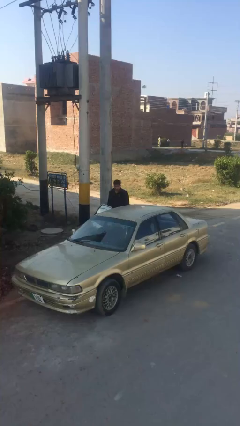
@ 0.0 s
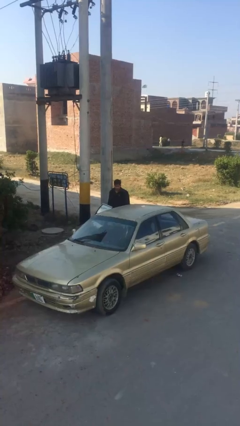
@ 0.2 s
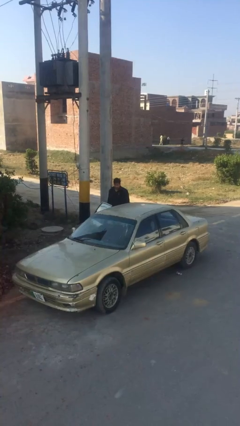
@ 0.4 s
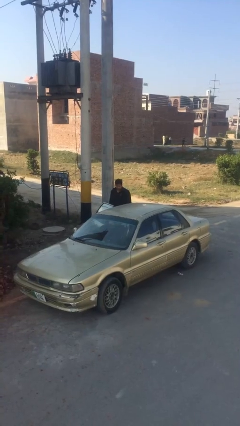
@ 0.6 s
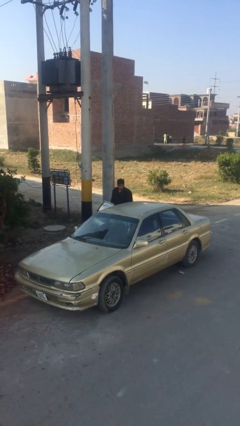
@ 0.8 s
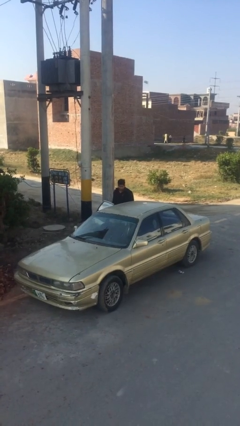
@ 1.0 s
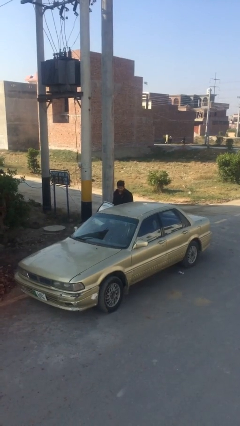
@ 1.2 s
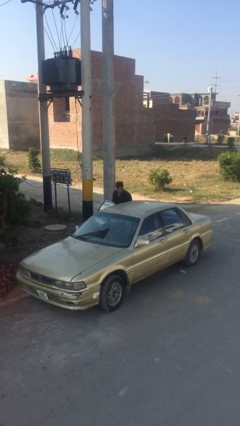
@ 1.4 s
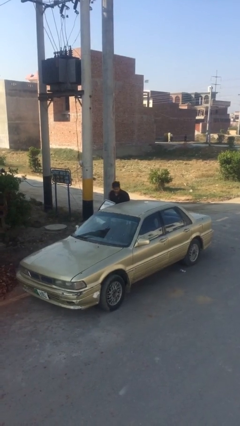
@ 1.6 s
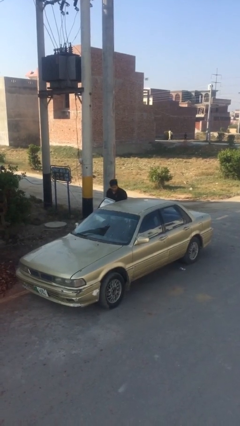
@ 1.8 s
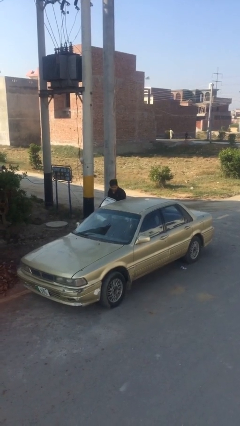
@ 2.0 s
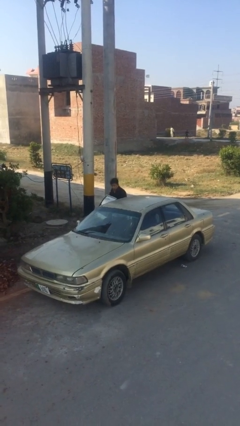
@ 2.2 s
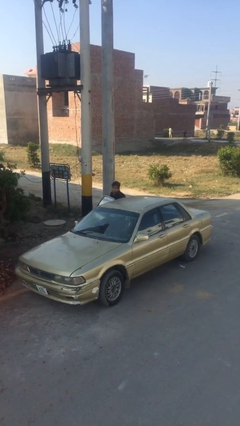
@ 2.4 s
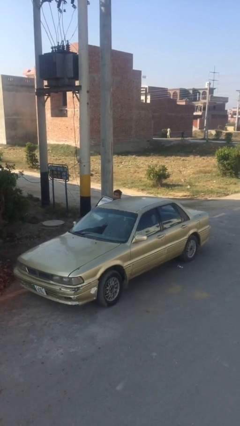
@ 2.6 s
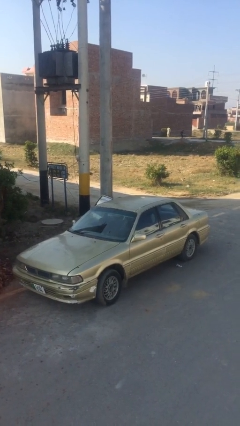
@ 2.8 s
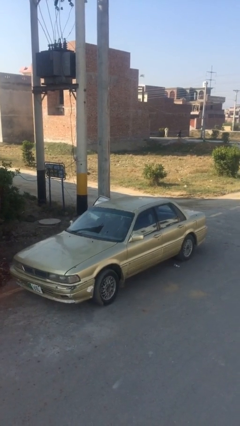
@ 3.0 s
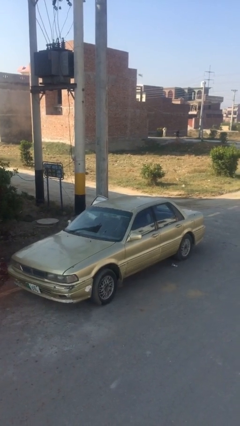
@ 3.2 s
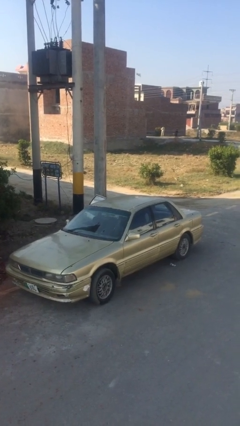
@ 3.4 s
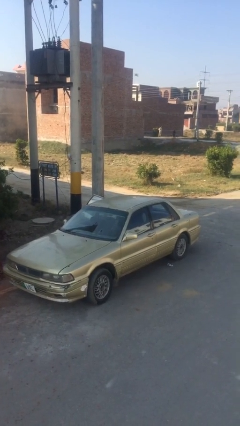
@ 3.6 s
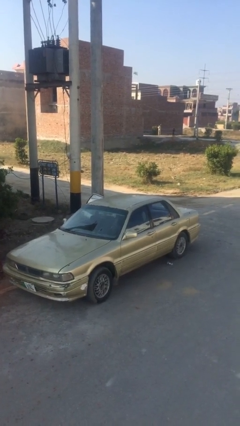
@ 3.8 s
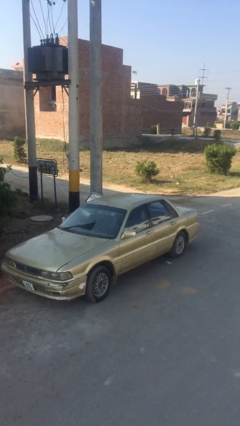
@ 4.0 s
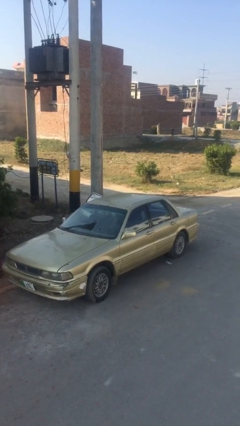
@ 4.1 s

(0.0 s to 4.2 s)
person enters car

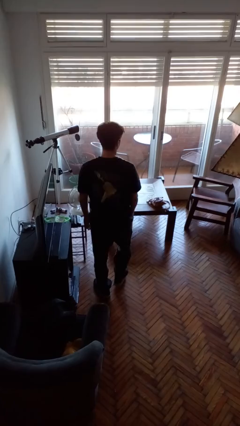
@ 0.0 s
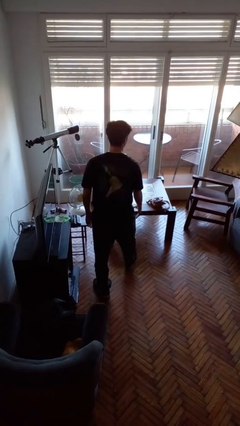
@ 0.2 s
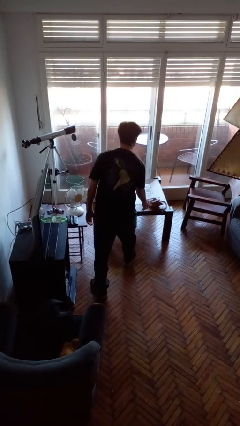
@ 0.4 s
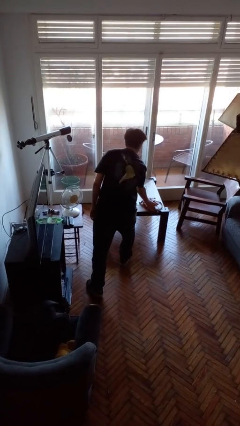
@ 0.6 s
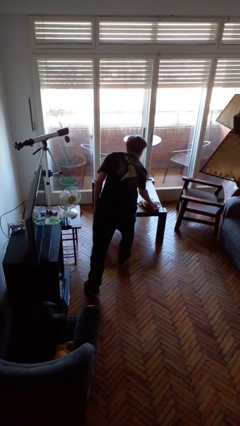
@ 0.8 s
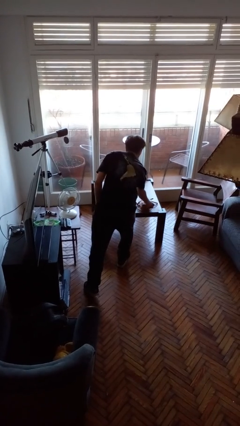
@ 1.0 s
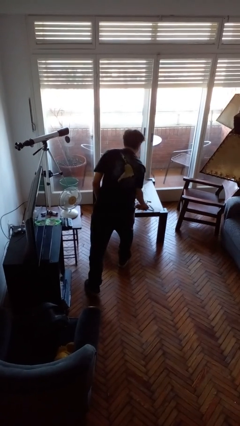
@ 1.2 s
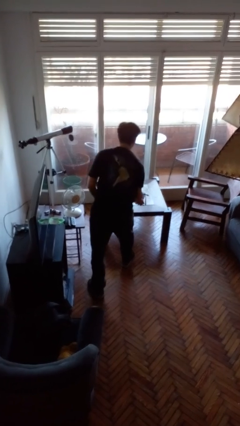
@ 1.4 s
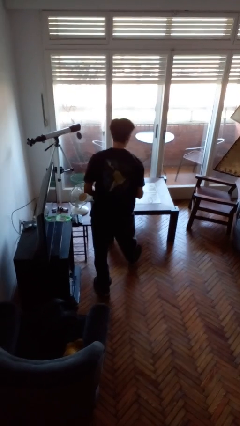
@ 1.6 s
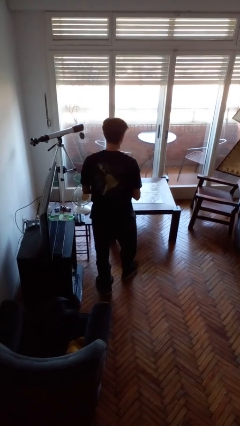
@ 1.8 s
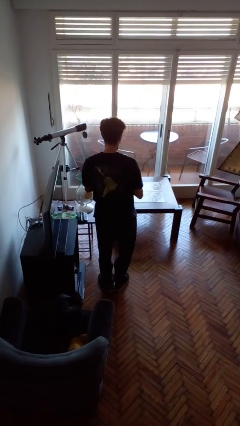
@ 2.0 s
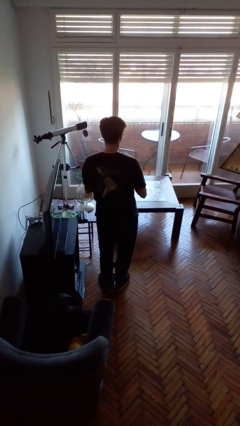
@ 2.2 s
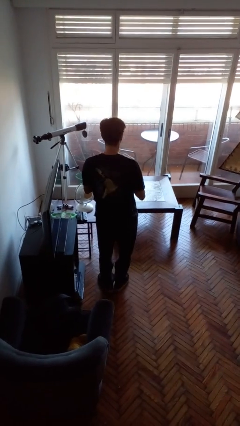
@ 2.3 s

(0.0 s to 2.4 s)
person picks up object from table

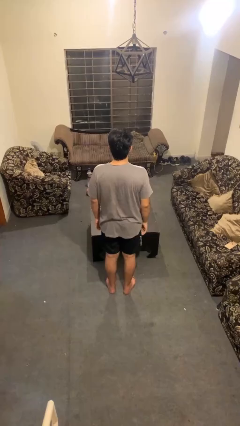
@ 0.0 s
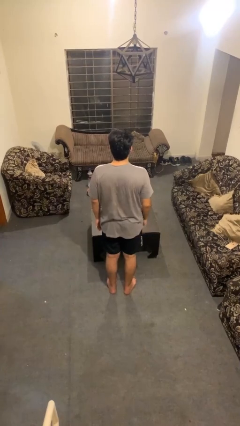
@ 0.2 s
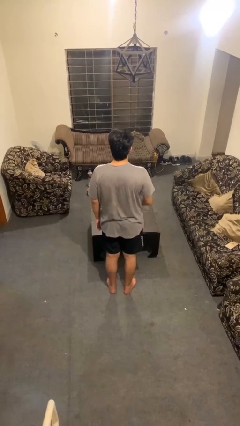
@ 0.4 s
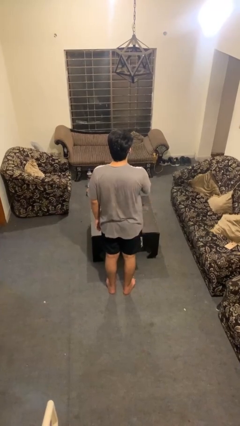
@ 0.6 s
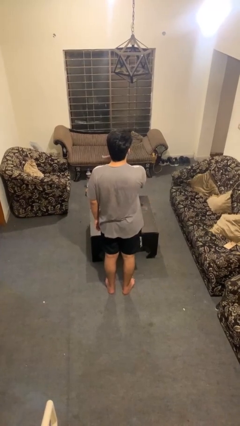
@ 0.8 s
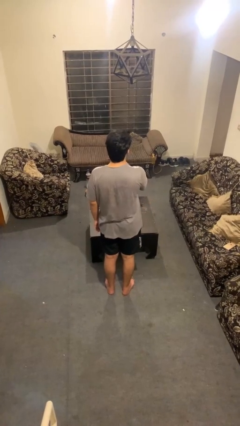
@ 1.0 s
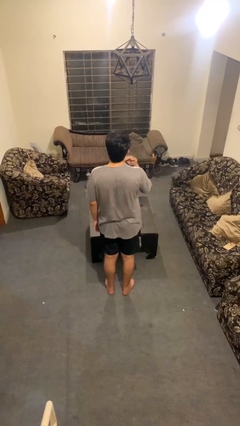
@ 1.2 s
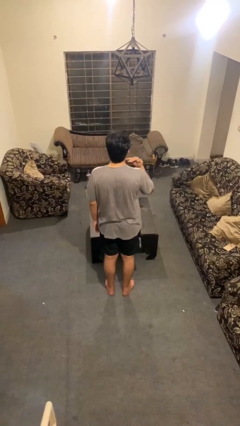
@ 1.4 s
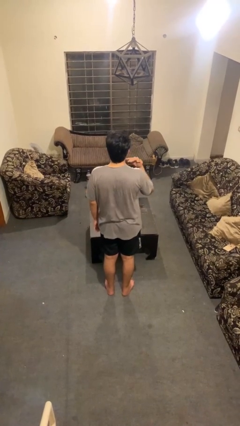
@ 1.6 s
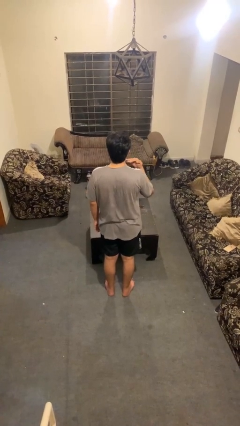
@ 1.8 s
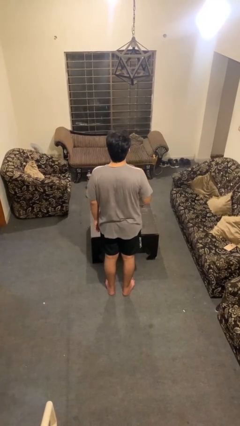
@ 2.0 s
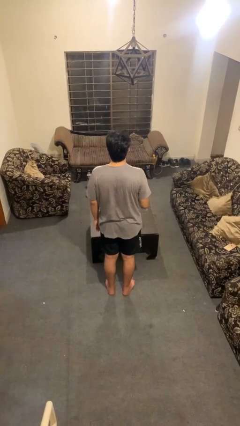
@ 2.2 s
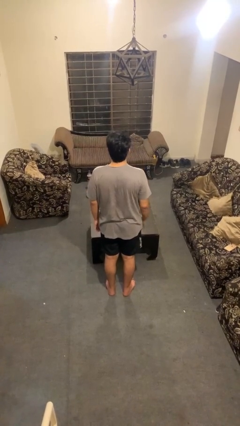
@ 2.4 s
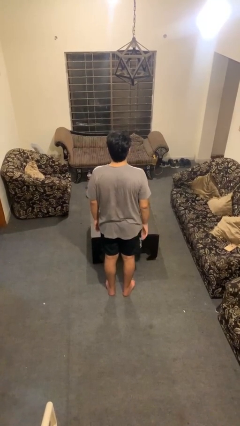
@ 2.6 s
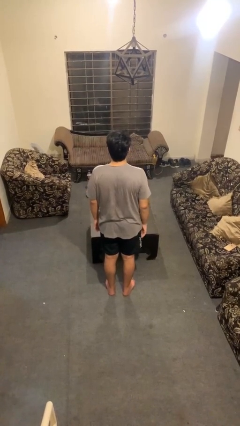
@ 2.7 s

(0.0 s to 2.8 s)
person gestures cut

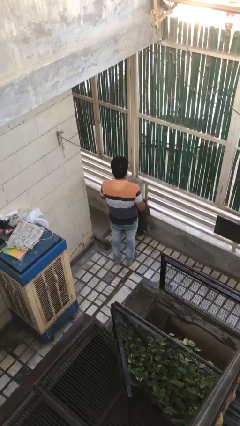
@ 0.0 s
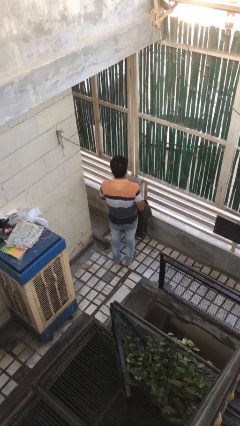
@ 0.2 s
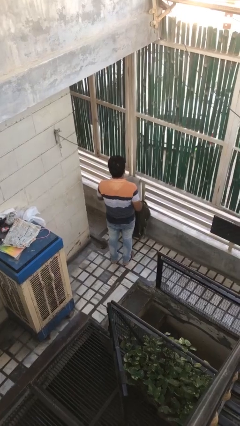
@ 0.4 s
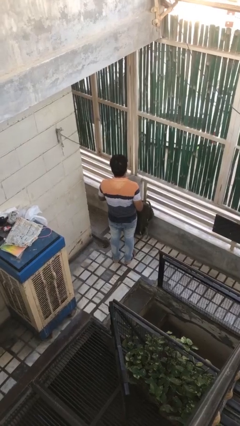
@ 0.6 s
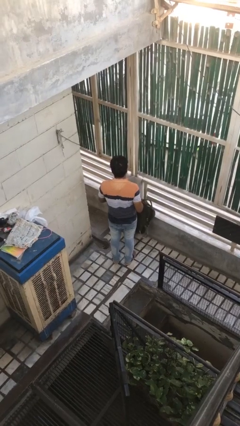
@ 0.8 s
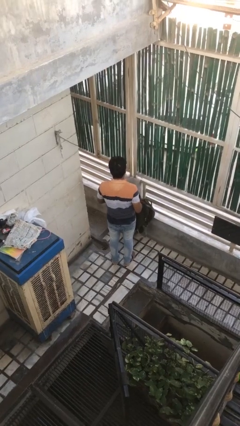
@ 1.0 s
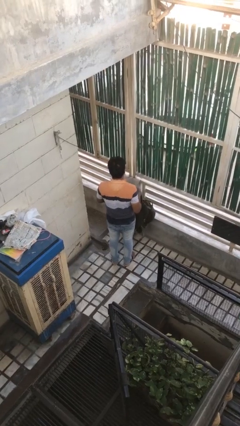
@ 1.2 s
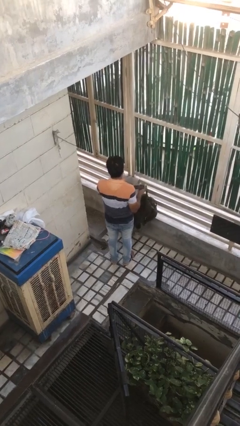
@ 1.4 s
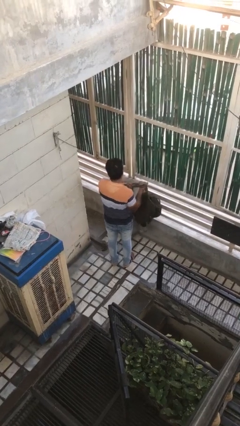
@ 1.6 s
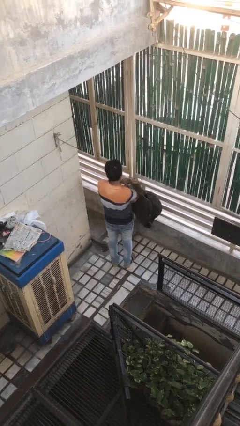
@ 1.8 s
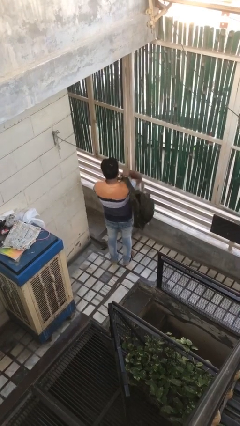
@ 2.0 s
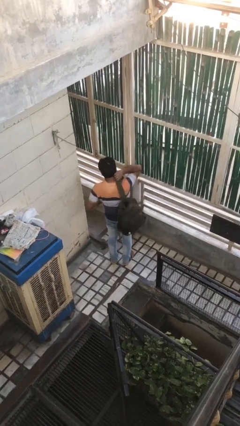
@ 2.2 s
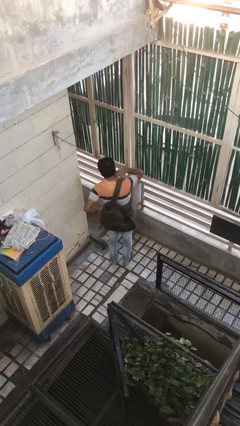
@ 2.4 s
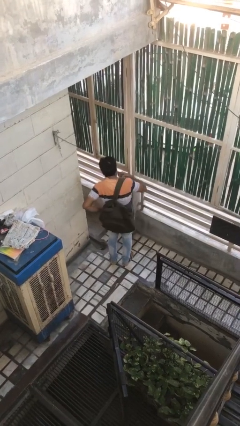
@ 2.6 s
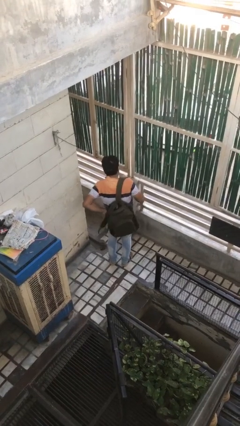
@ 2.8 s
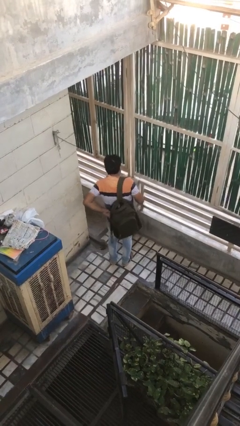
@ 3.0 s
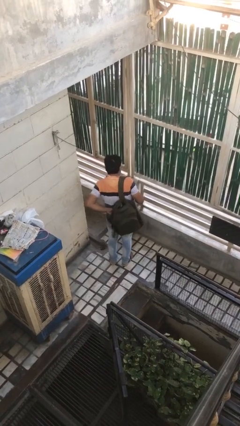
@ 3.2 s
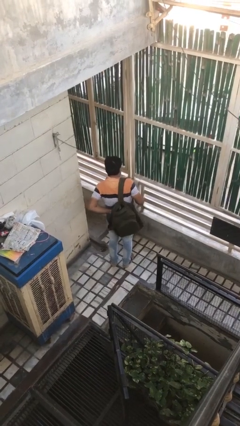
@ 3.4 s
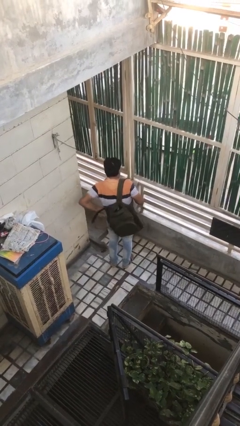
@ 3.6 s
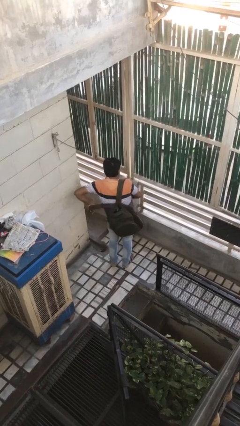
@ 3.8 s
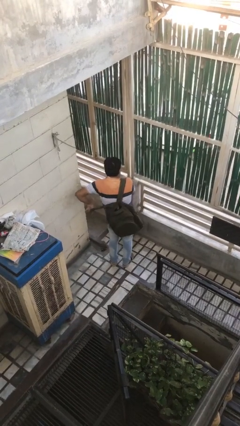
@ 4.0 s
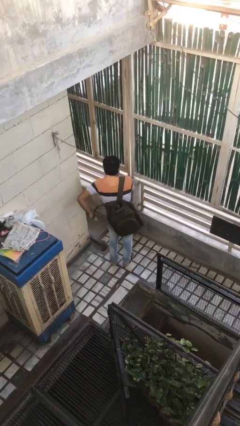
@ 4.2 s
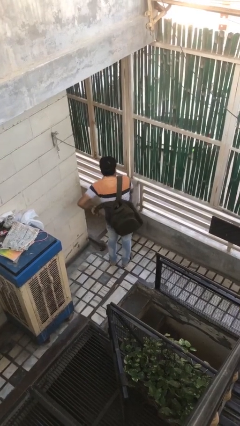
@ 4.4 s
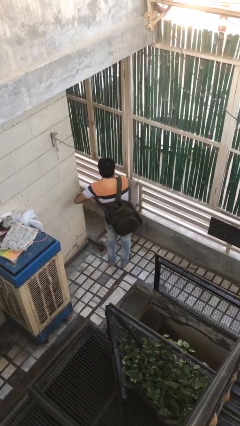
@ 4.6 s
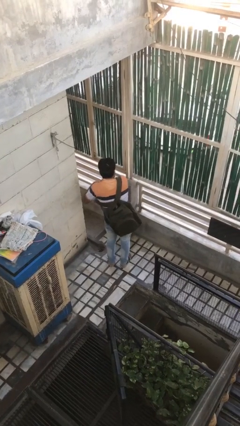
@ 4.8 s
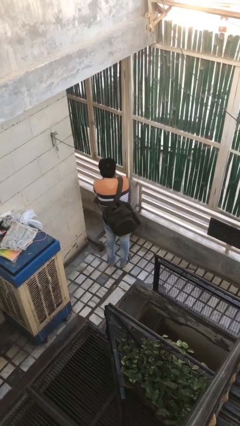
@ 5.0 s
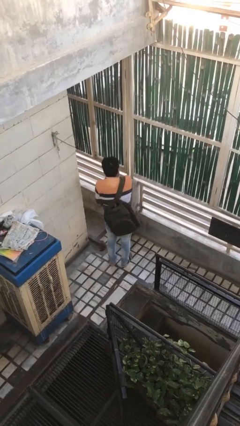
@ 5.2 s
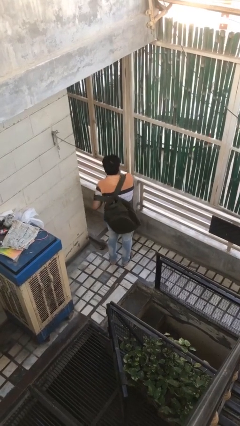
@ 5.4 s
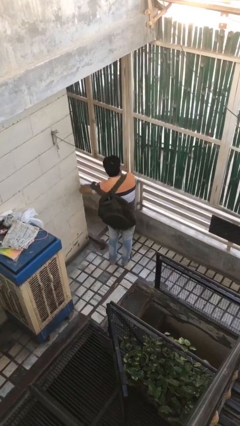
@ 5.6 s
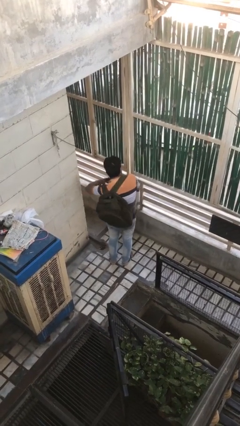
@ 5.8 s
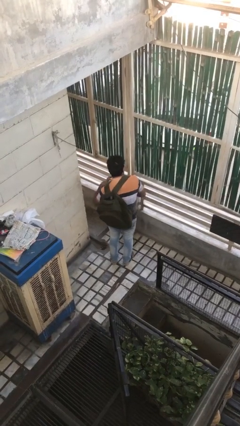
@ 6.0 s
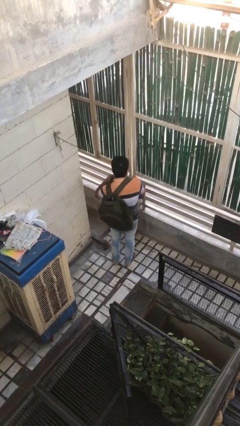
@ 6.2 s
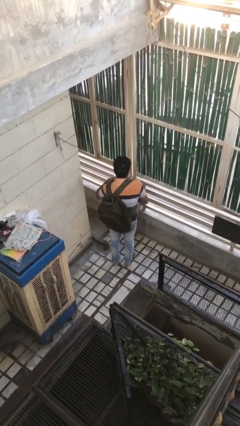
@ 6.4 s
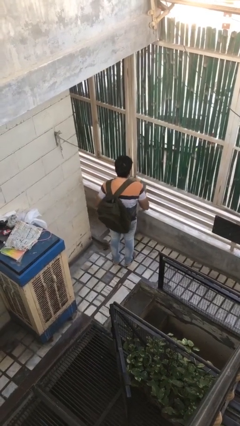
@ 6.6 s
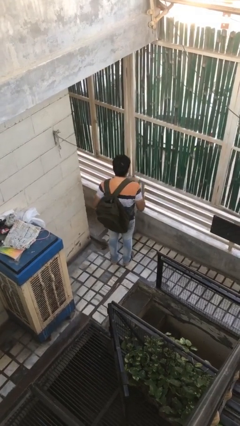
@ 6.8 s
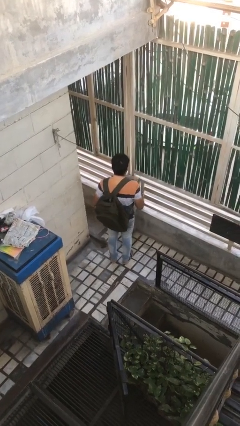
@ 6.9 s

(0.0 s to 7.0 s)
person puts on backpack

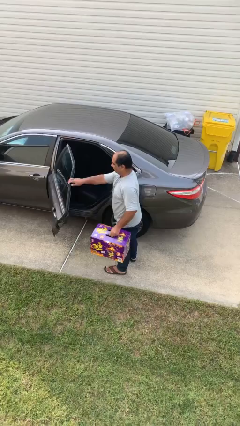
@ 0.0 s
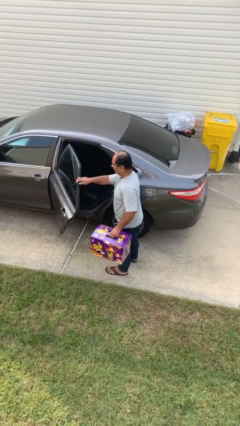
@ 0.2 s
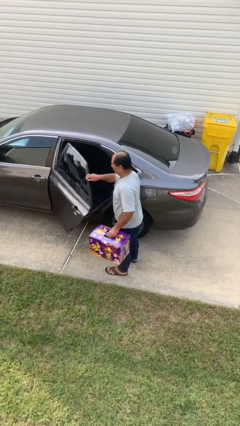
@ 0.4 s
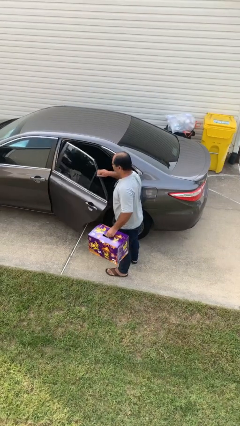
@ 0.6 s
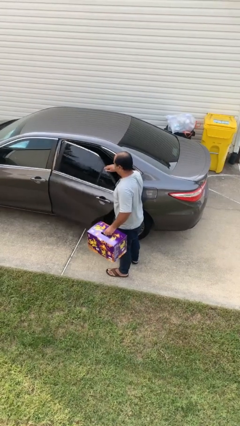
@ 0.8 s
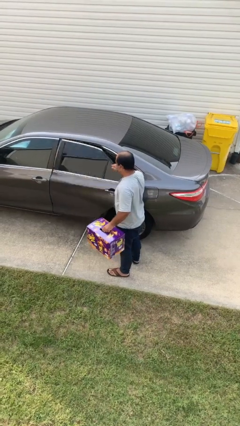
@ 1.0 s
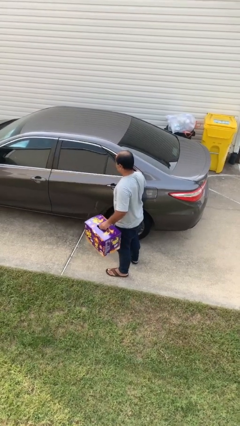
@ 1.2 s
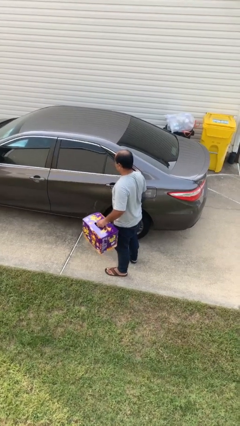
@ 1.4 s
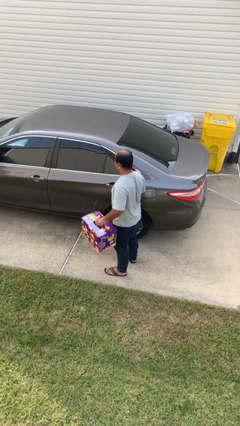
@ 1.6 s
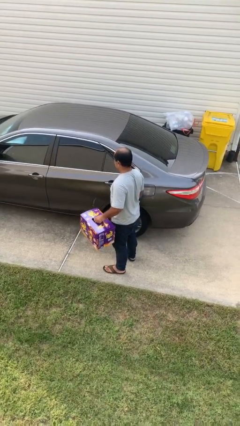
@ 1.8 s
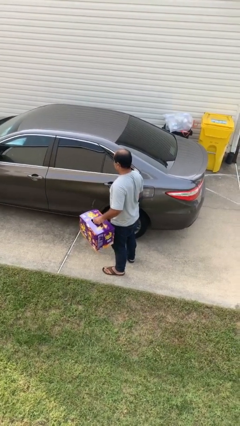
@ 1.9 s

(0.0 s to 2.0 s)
person closes car door
